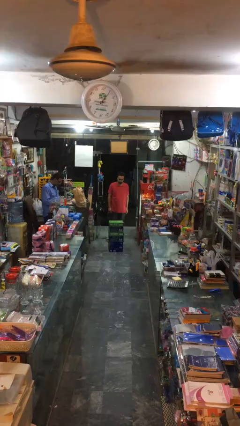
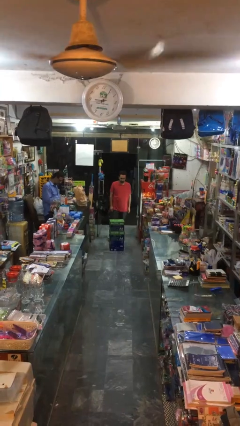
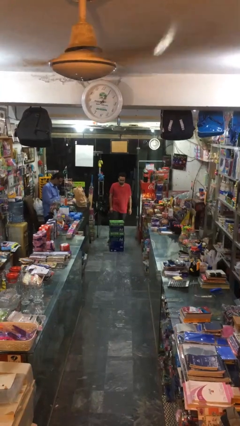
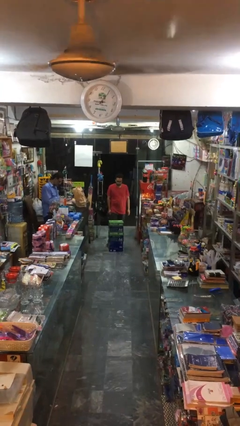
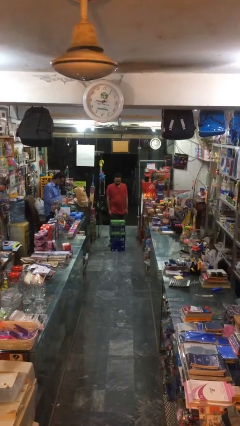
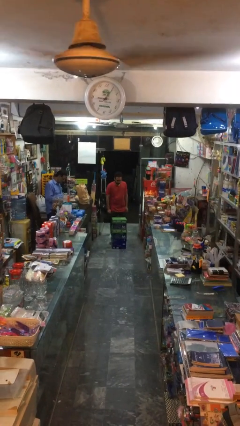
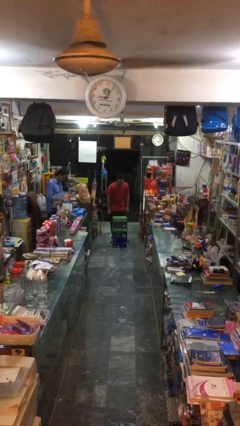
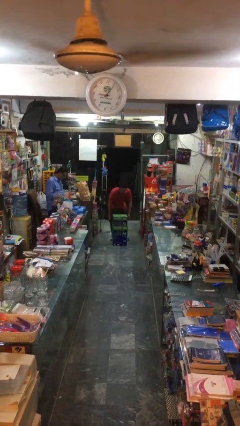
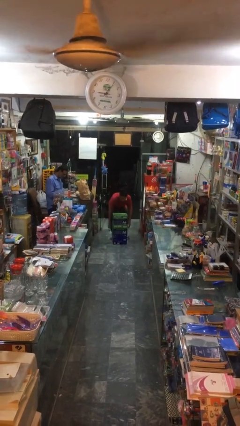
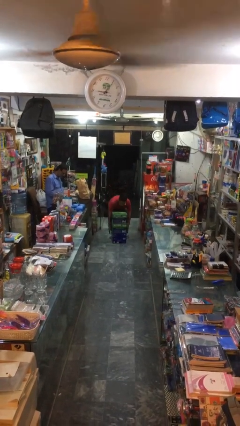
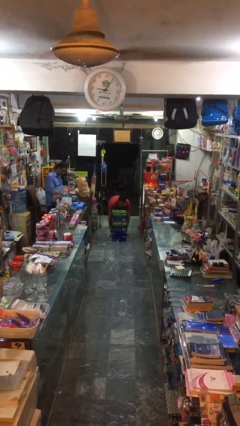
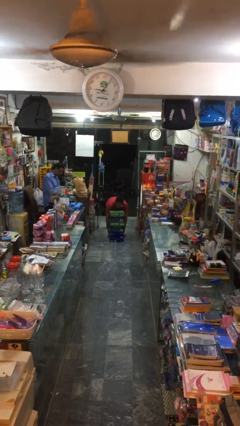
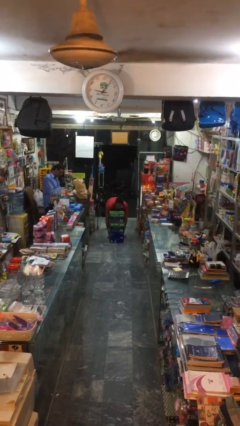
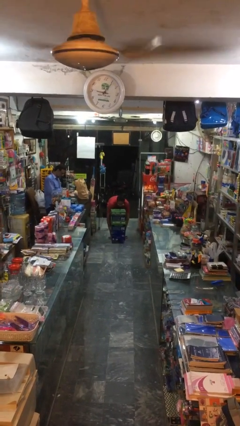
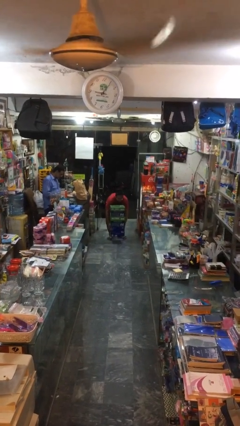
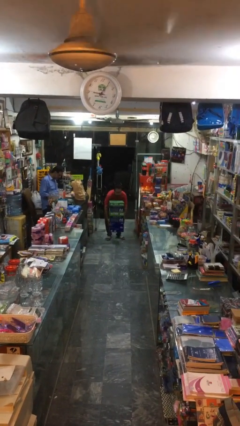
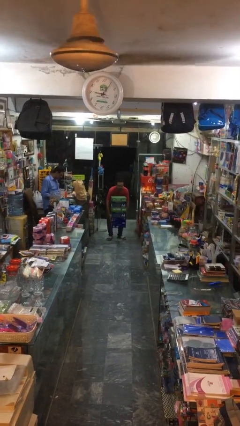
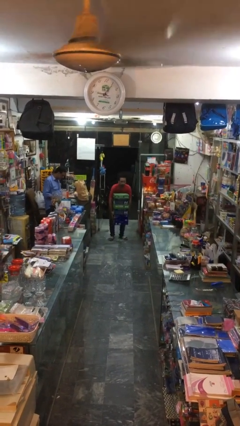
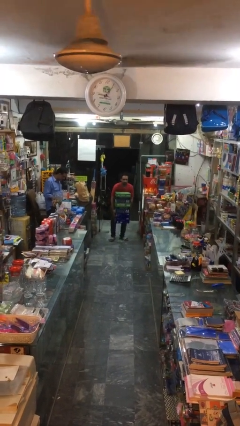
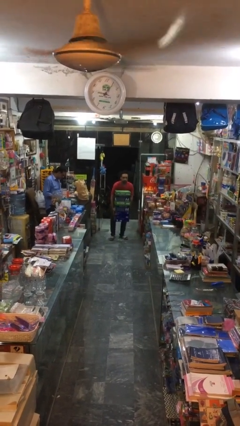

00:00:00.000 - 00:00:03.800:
person picks up object from floor

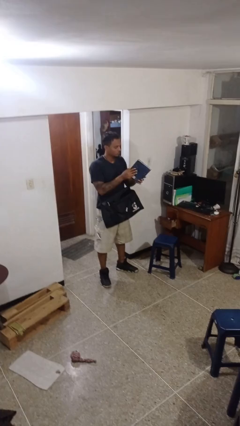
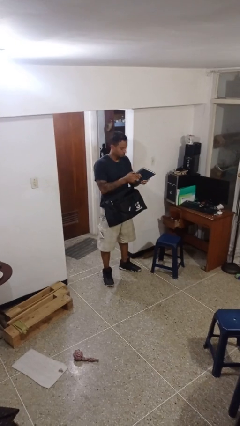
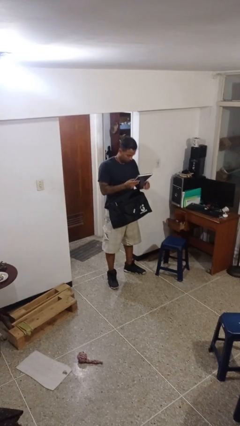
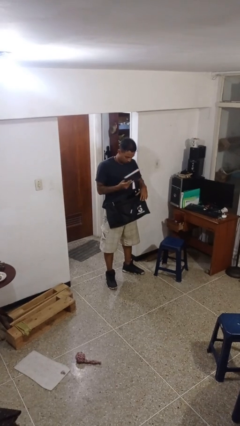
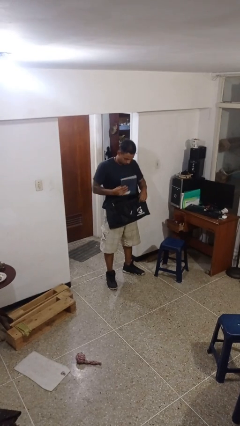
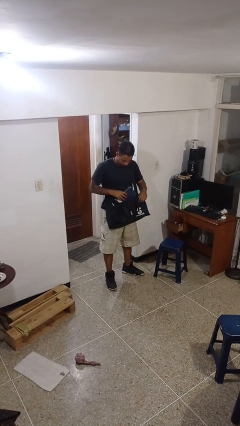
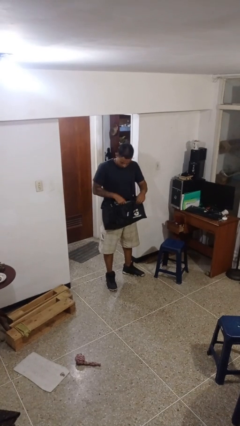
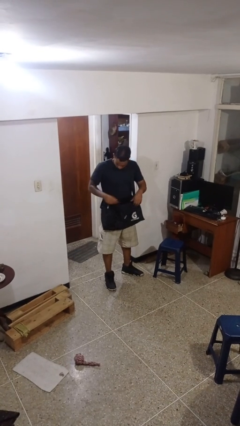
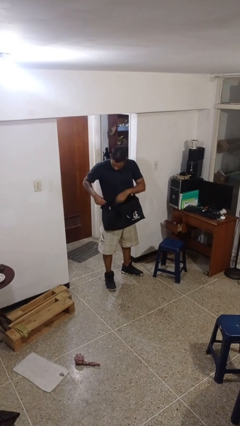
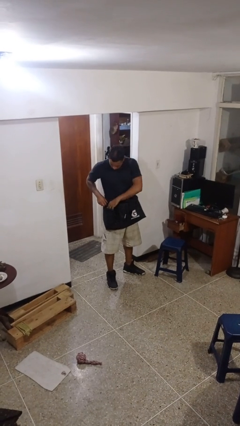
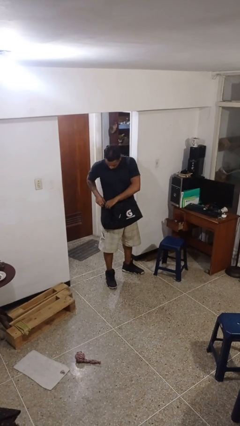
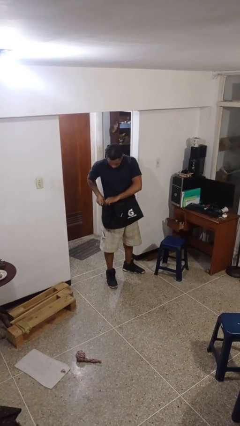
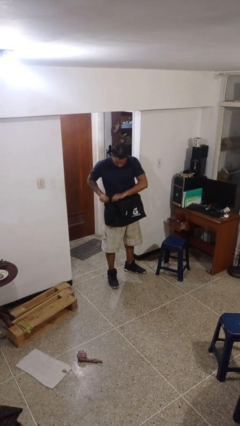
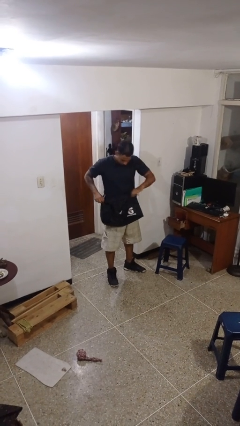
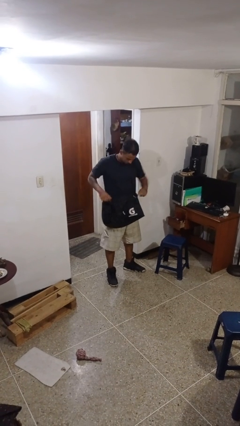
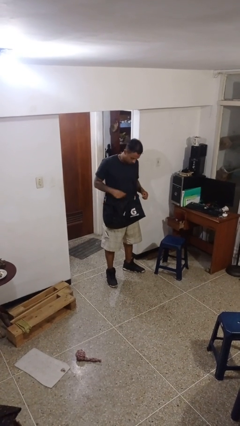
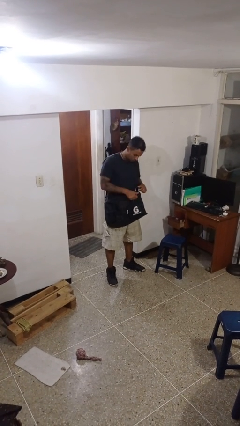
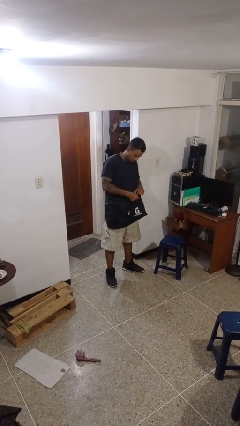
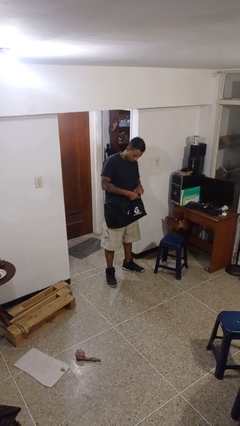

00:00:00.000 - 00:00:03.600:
person puts object into purse

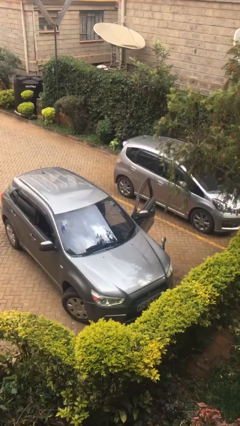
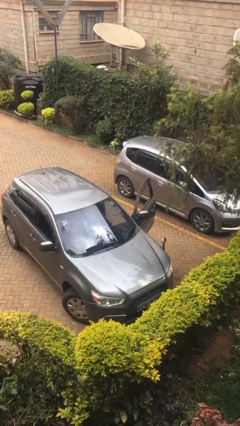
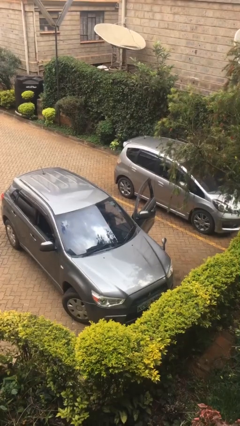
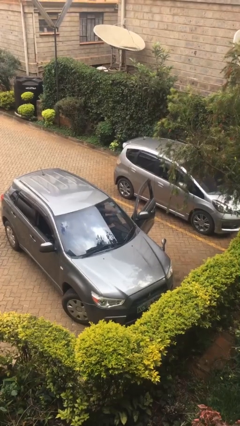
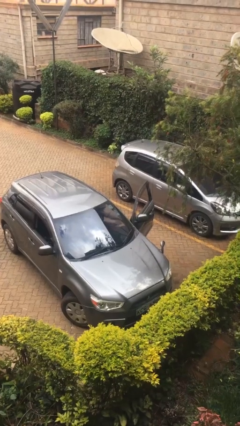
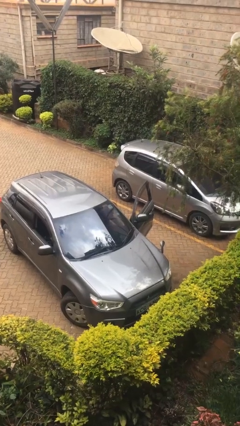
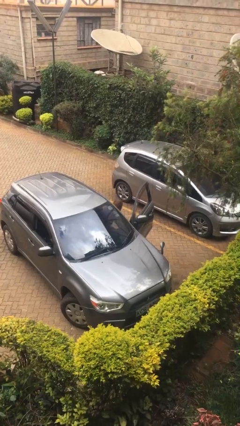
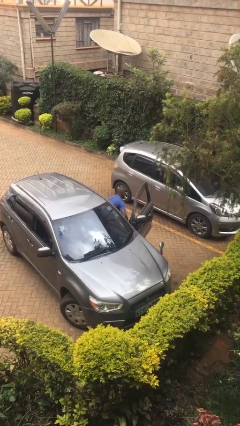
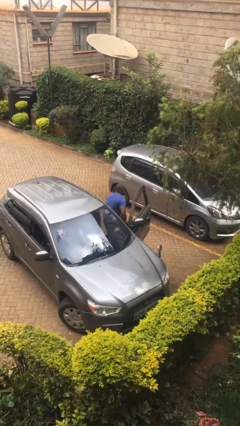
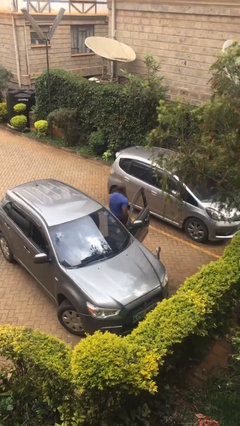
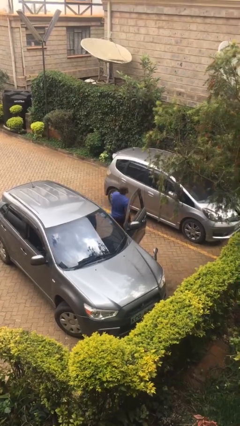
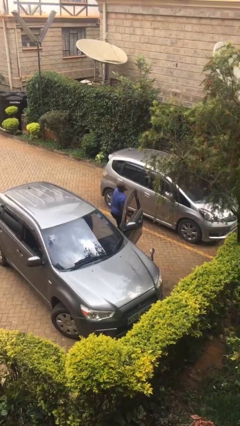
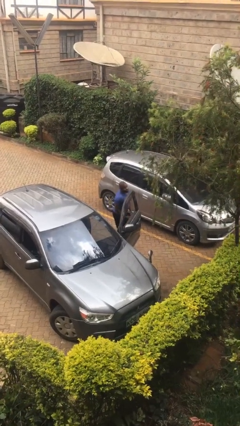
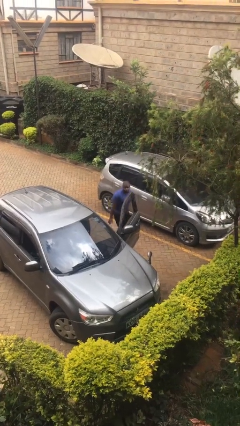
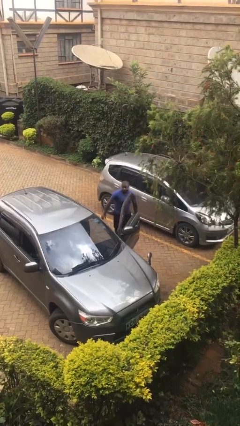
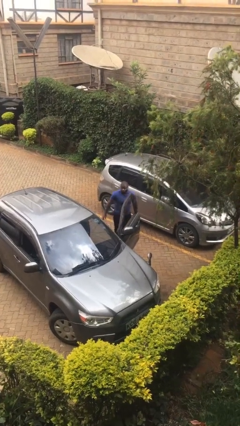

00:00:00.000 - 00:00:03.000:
person exits car

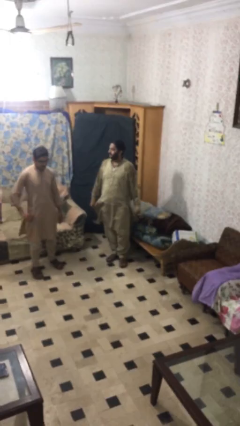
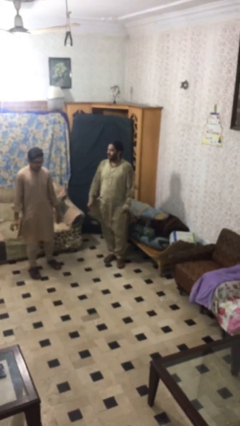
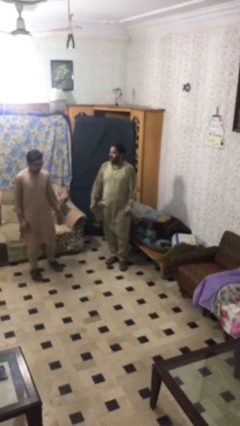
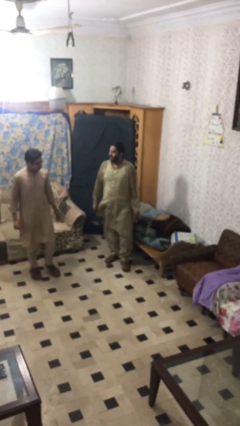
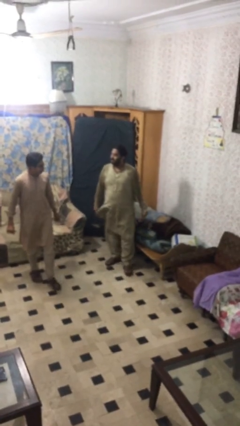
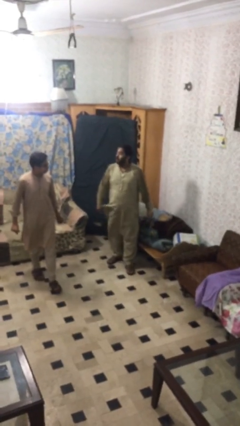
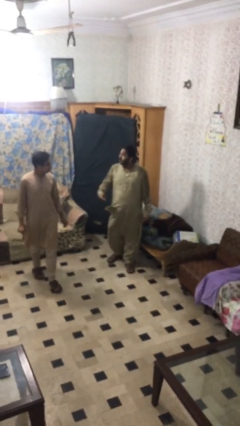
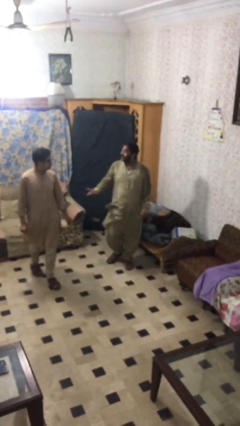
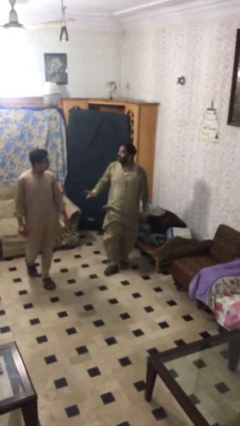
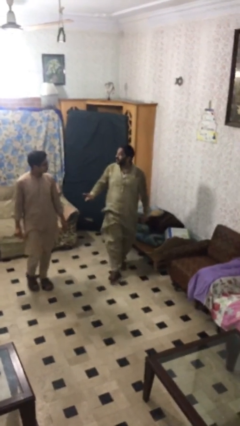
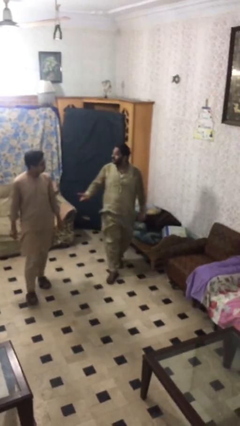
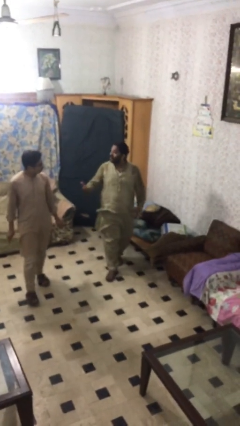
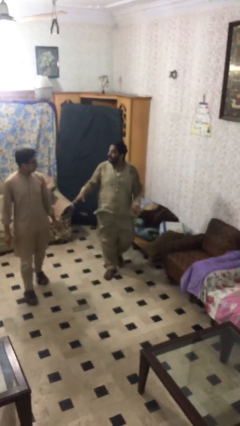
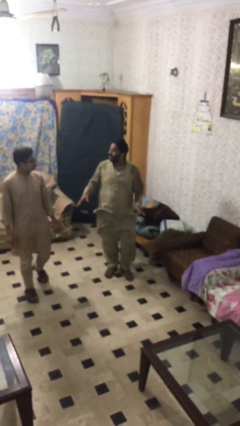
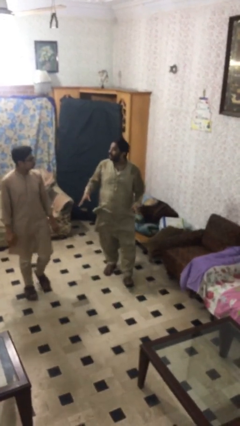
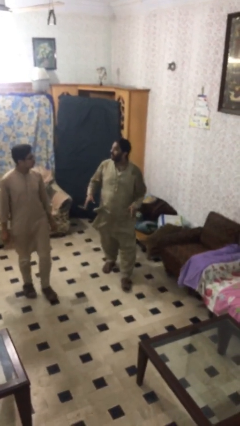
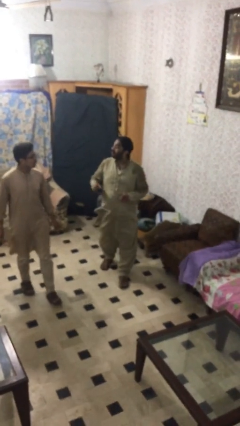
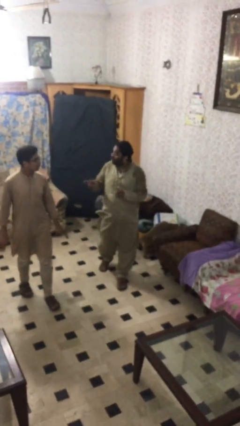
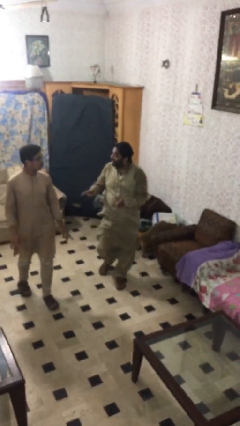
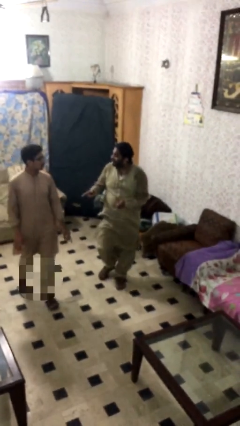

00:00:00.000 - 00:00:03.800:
person talks to person

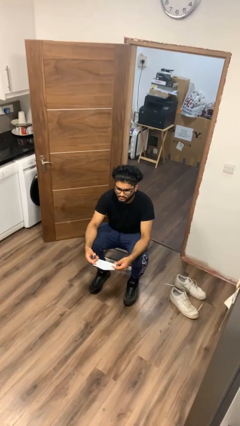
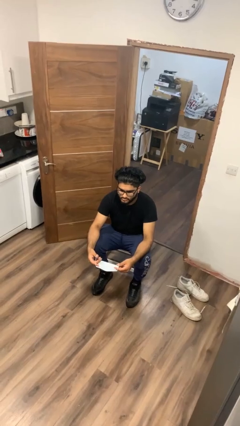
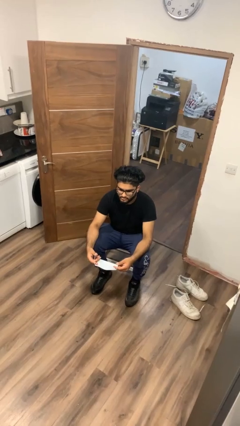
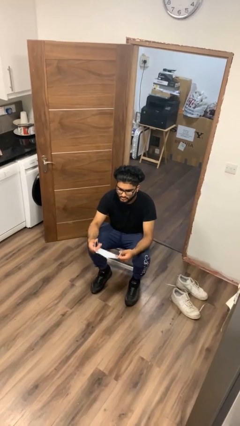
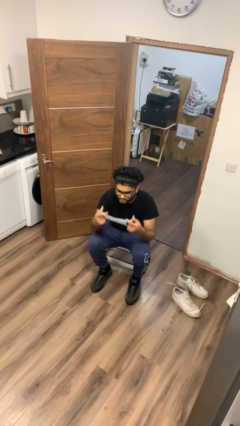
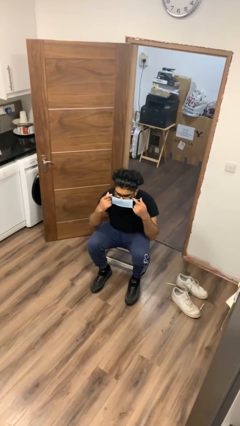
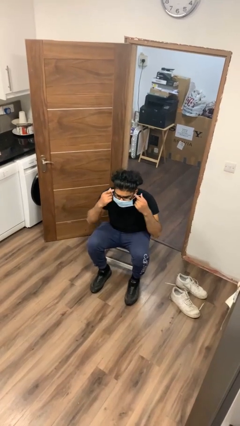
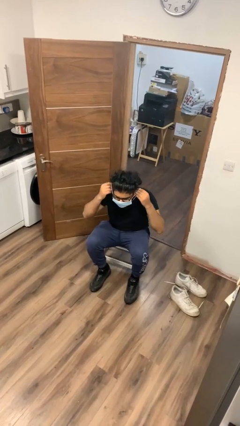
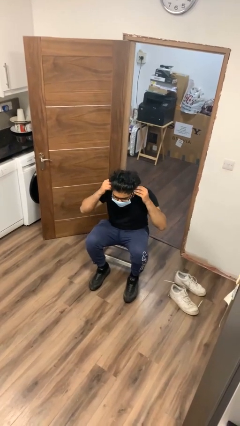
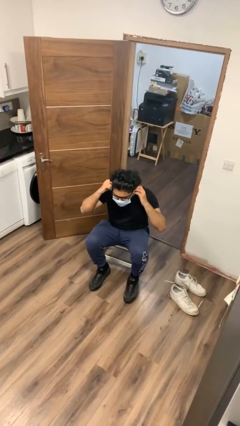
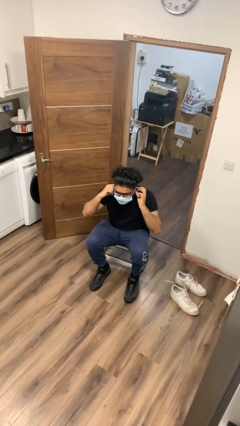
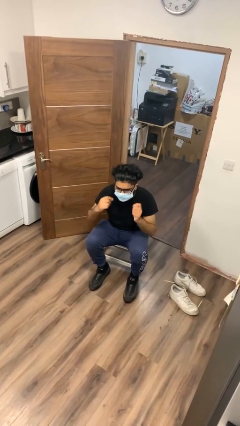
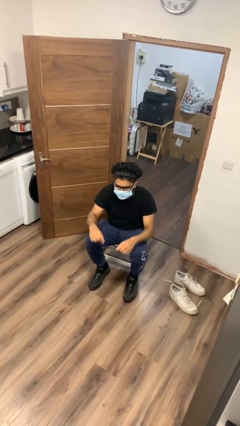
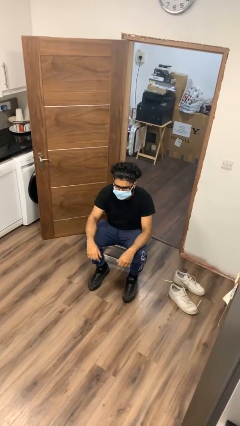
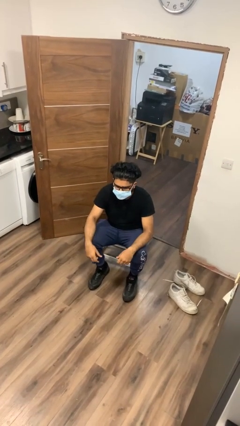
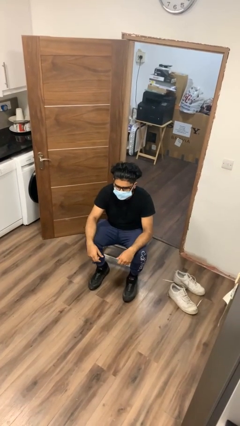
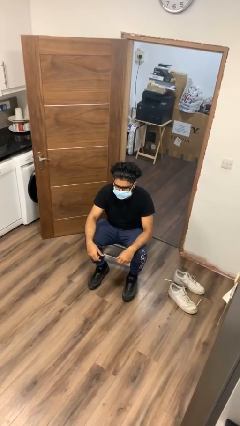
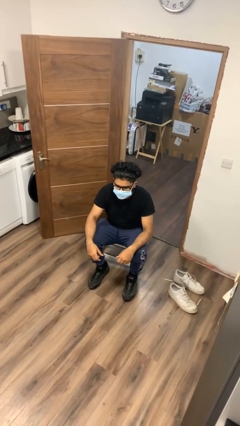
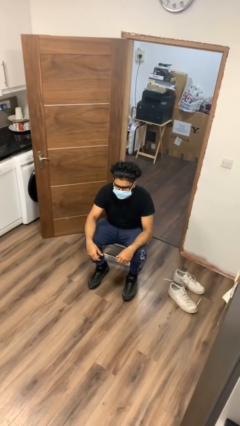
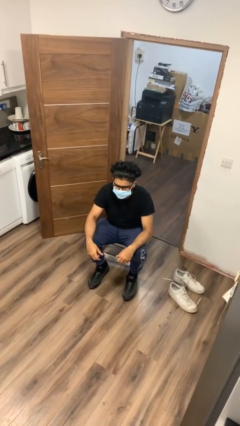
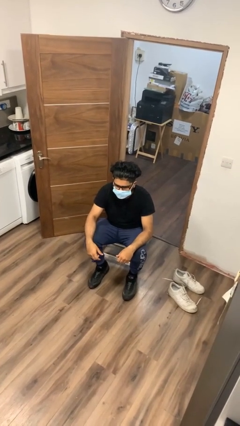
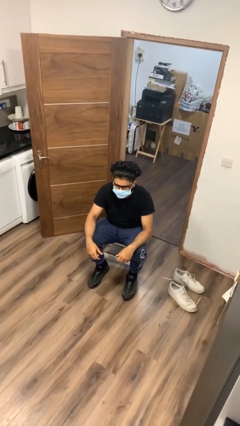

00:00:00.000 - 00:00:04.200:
person puts on facemask
